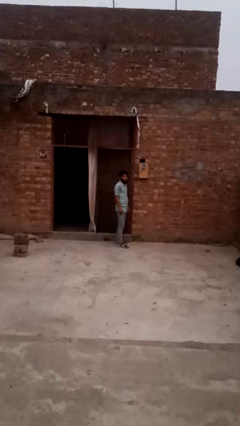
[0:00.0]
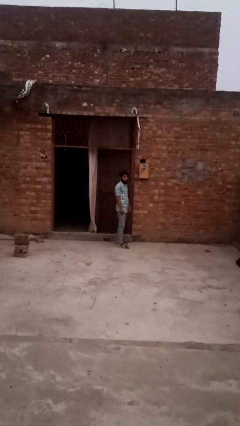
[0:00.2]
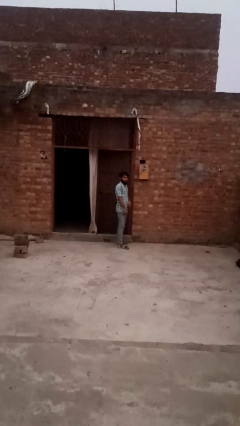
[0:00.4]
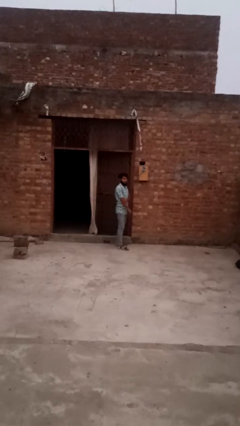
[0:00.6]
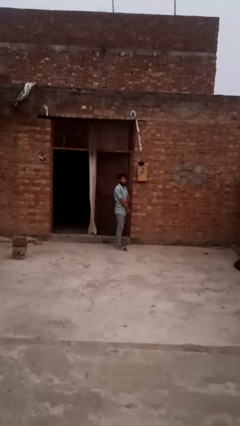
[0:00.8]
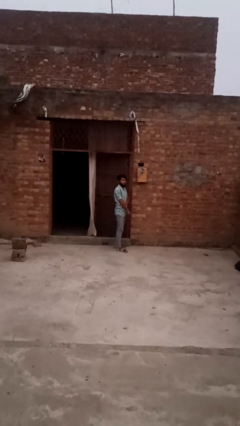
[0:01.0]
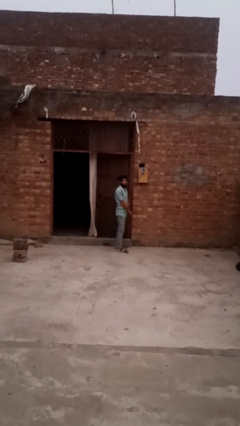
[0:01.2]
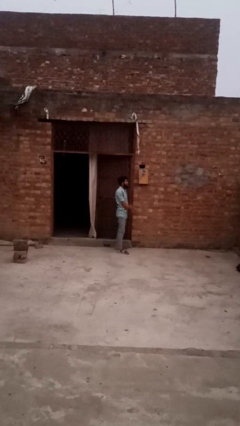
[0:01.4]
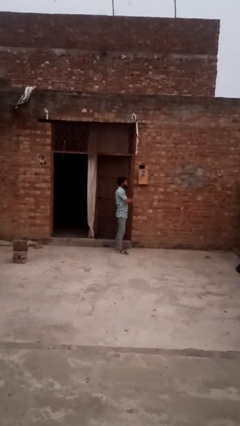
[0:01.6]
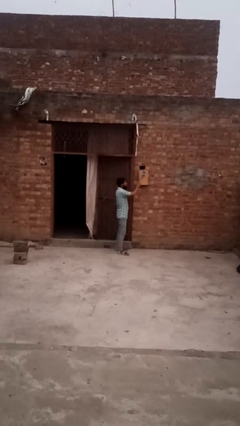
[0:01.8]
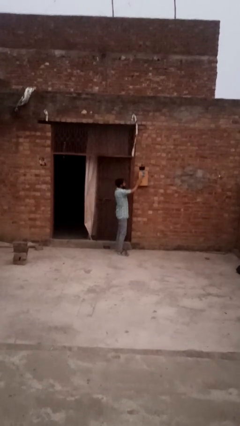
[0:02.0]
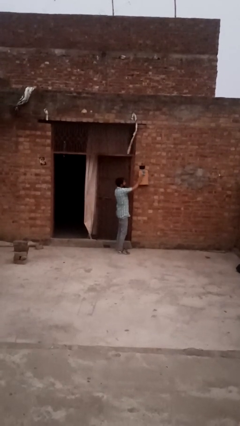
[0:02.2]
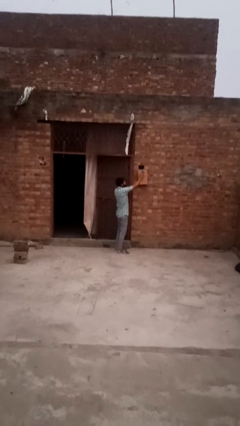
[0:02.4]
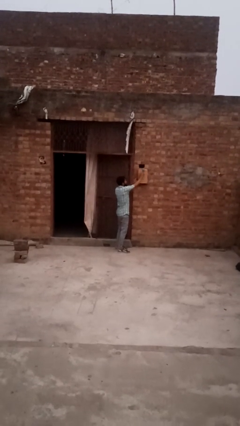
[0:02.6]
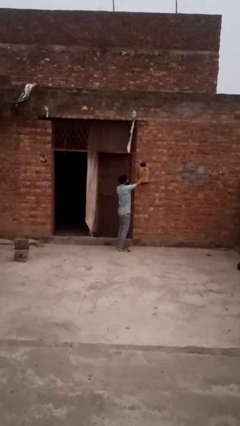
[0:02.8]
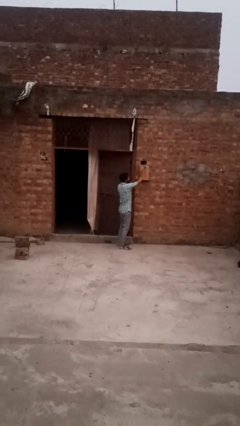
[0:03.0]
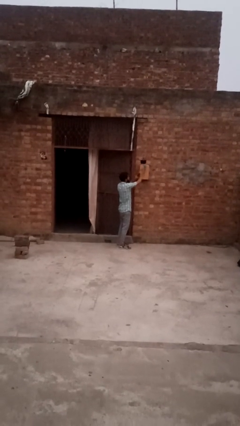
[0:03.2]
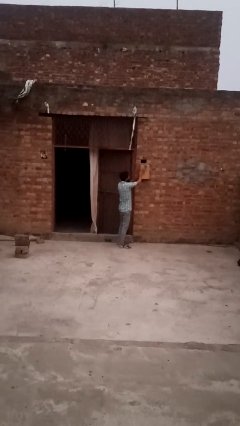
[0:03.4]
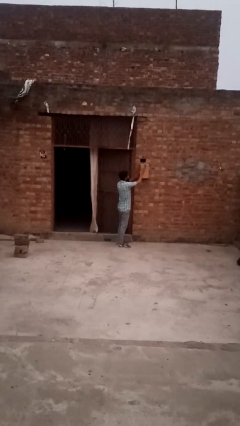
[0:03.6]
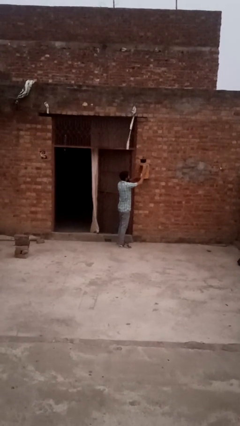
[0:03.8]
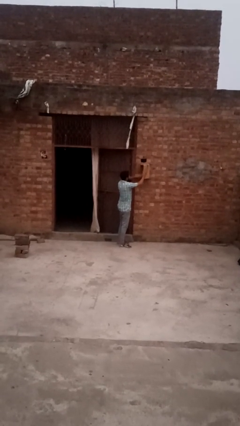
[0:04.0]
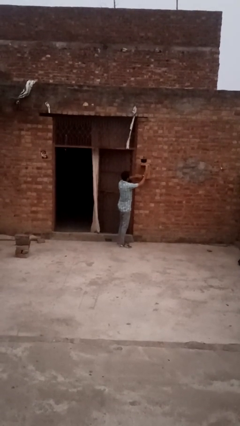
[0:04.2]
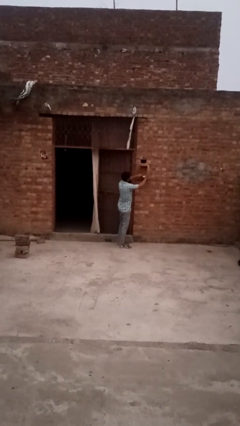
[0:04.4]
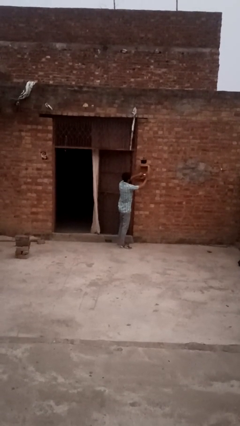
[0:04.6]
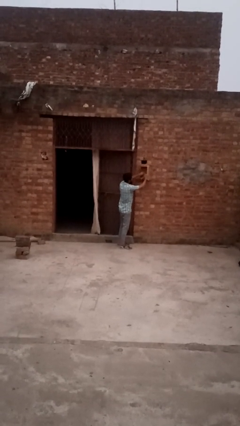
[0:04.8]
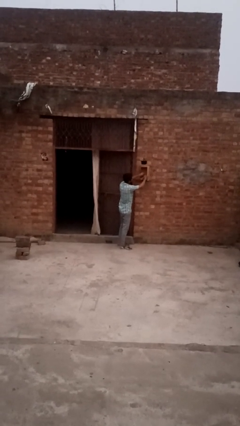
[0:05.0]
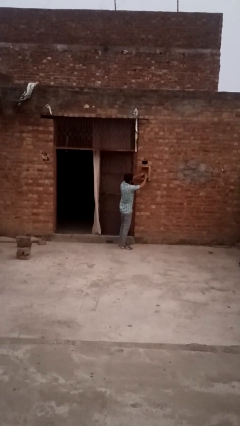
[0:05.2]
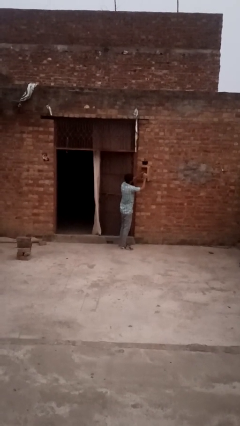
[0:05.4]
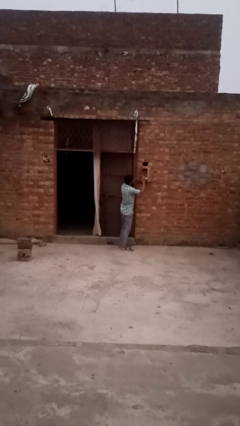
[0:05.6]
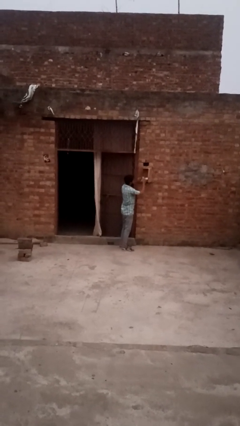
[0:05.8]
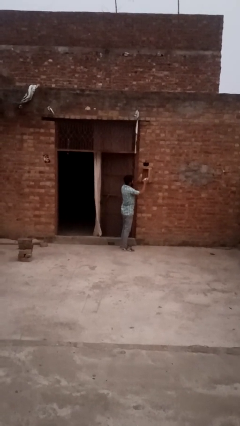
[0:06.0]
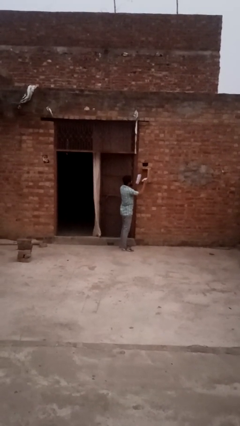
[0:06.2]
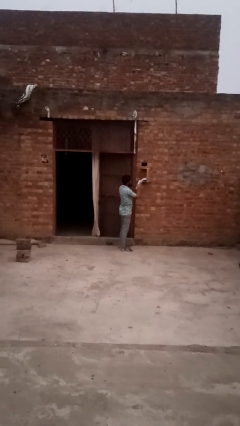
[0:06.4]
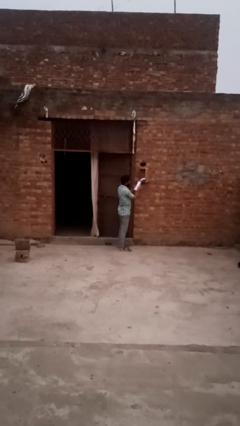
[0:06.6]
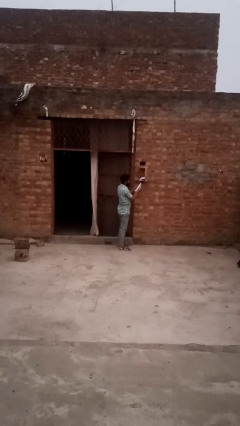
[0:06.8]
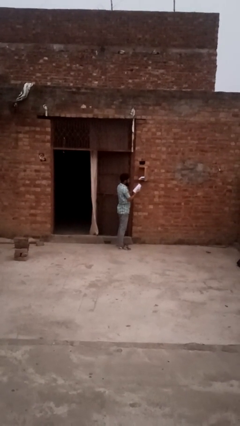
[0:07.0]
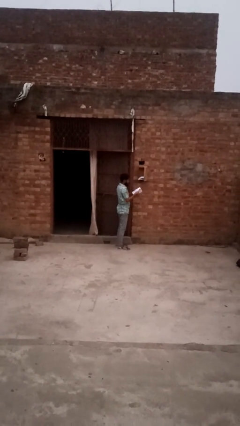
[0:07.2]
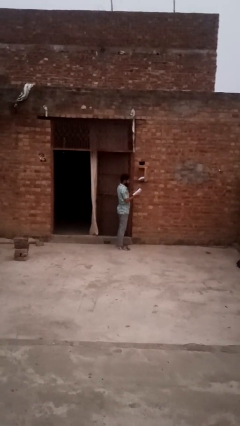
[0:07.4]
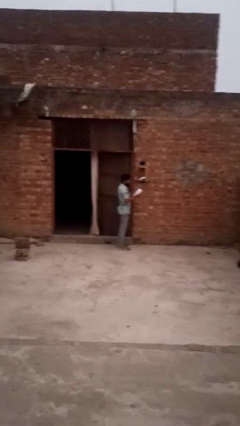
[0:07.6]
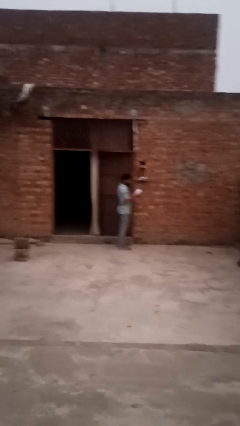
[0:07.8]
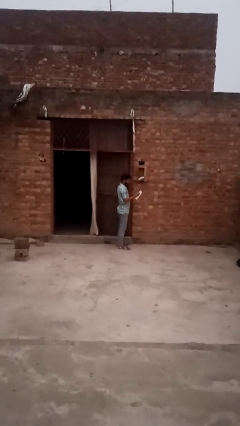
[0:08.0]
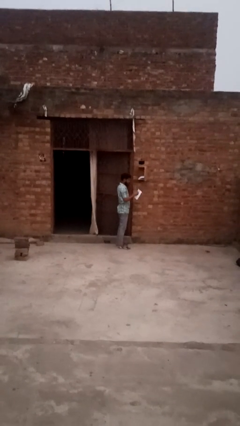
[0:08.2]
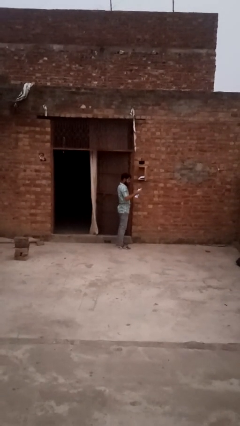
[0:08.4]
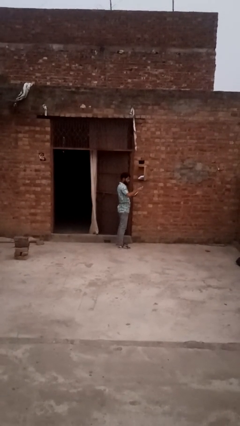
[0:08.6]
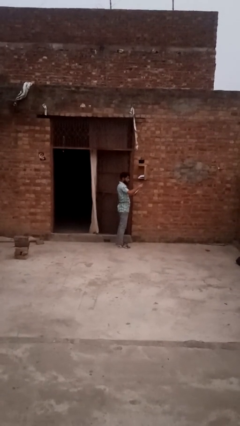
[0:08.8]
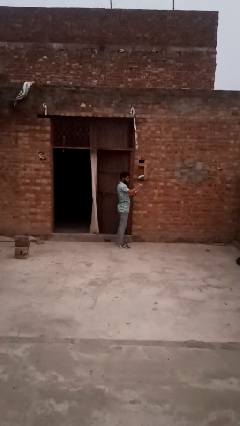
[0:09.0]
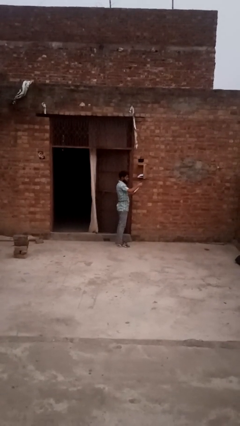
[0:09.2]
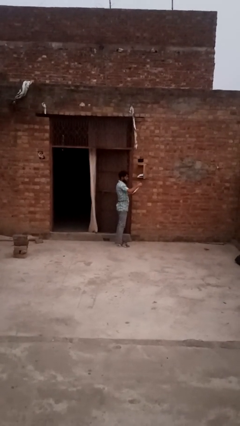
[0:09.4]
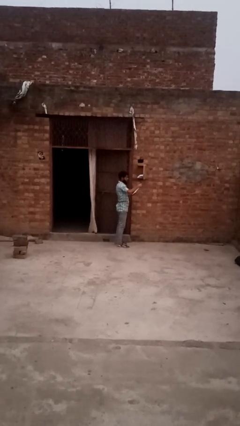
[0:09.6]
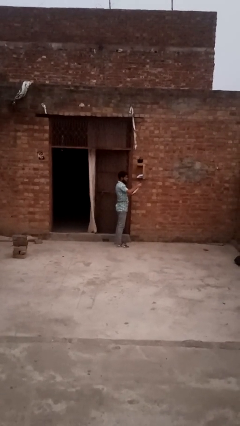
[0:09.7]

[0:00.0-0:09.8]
person puts letters in mailbox

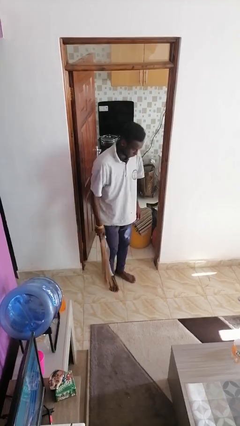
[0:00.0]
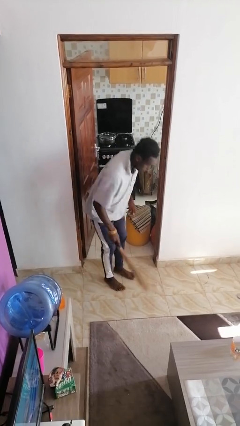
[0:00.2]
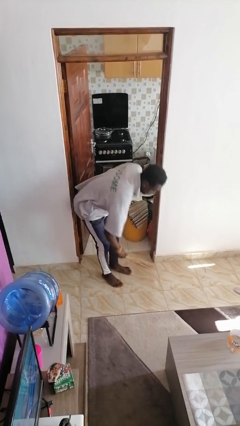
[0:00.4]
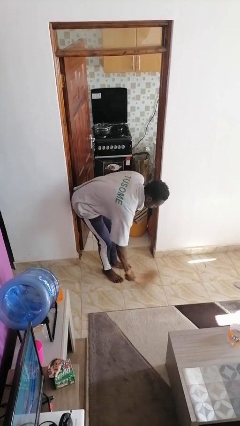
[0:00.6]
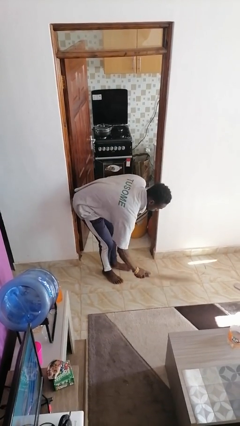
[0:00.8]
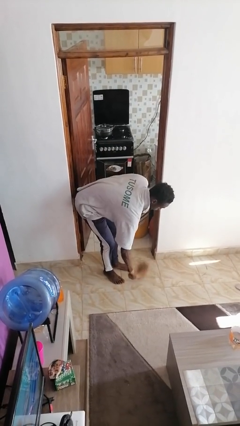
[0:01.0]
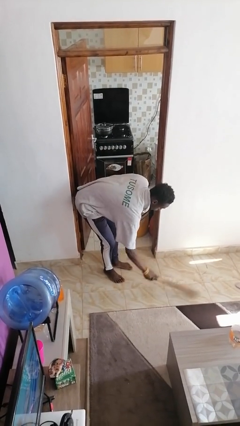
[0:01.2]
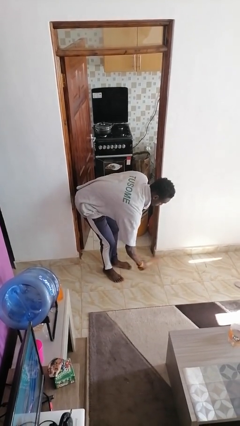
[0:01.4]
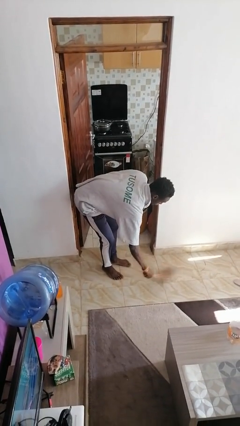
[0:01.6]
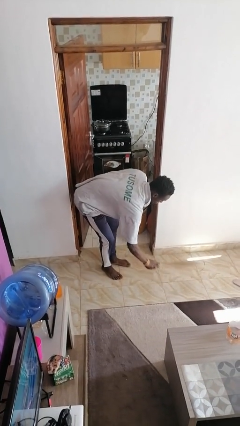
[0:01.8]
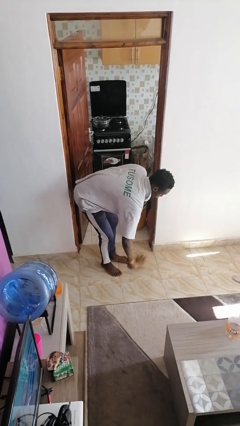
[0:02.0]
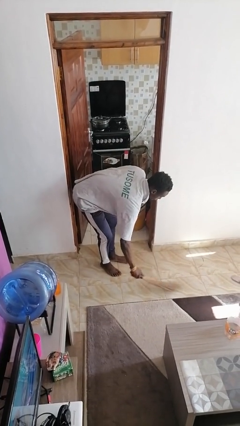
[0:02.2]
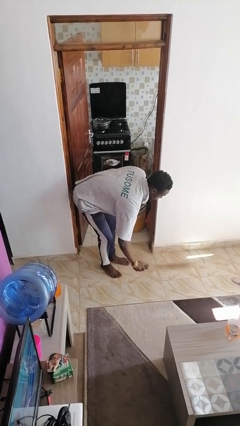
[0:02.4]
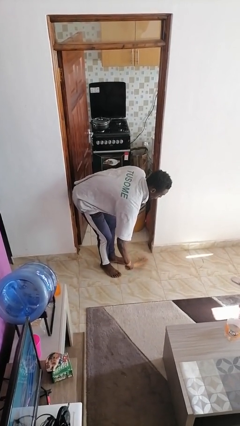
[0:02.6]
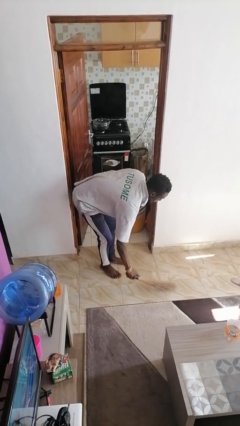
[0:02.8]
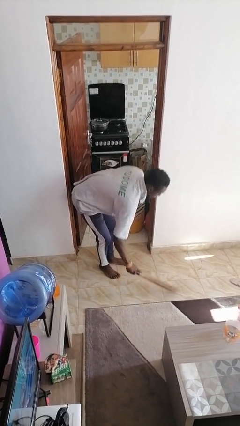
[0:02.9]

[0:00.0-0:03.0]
person sweeps floor

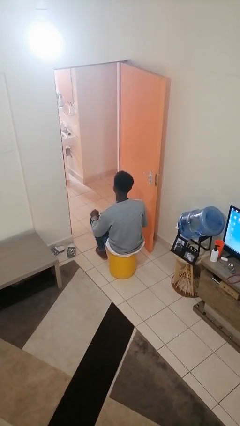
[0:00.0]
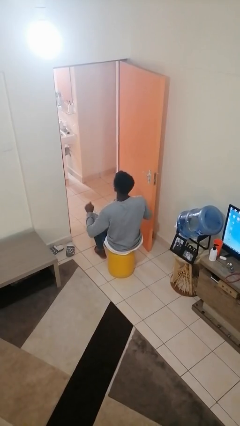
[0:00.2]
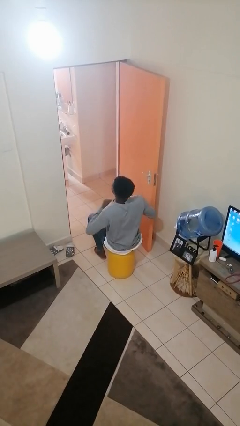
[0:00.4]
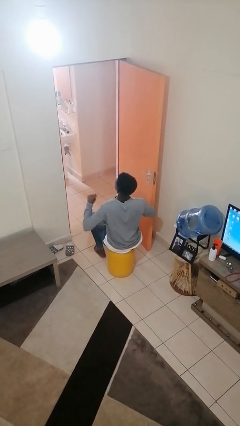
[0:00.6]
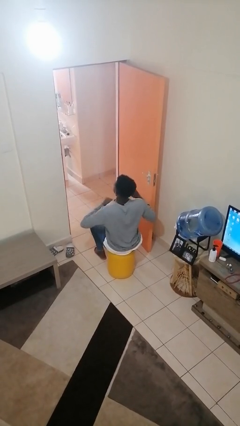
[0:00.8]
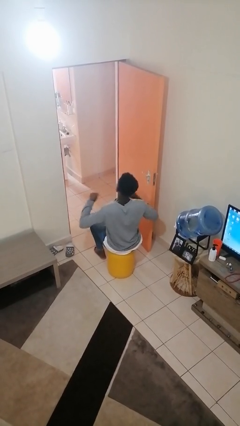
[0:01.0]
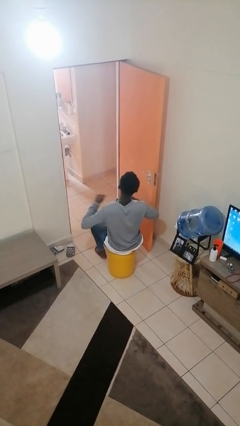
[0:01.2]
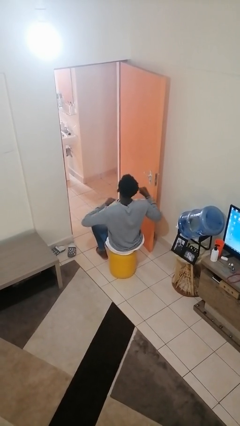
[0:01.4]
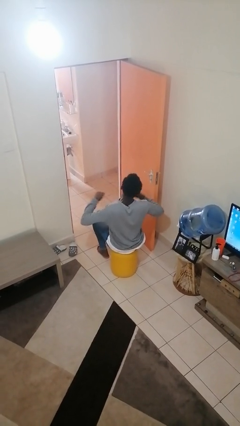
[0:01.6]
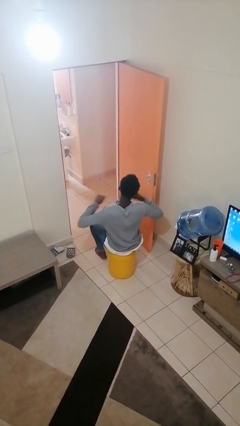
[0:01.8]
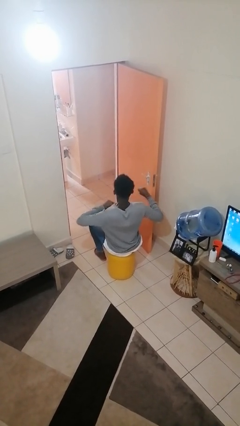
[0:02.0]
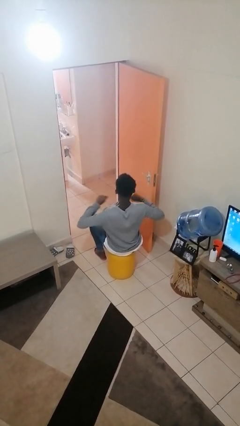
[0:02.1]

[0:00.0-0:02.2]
person drums on chest

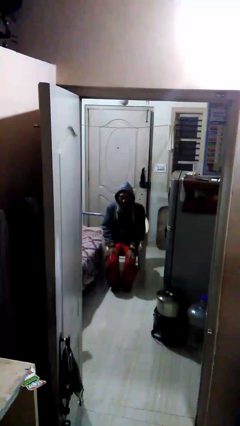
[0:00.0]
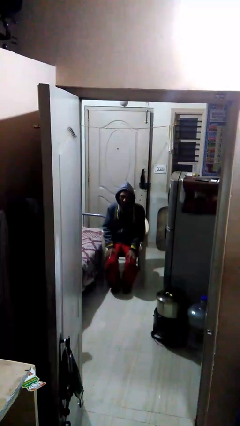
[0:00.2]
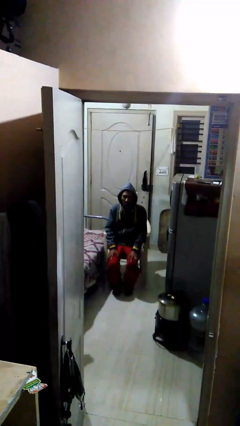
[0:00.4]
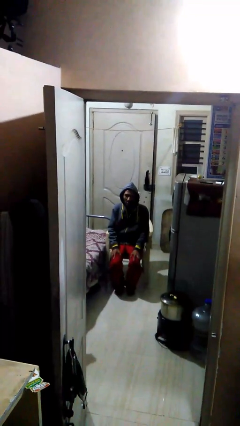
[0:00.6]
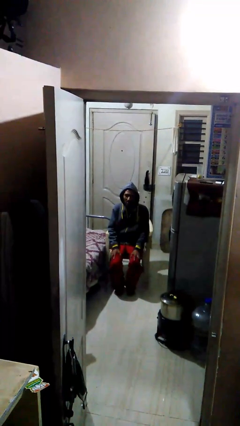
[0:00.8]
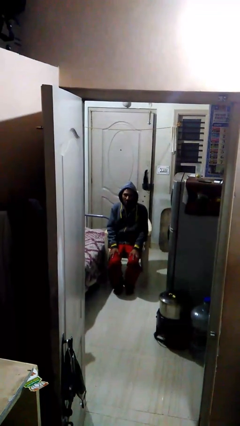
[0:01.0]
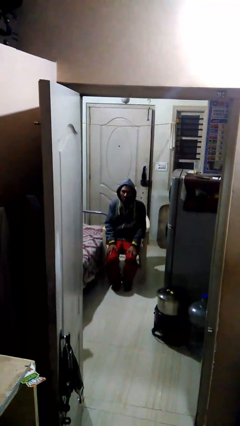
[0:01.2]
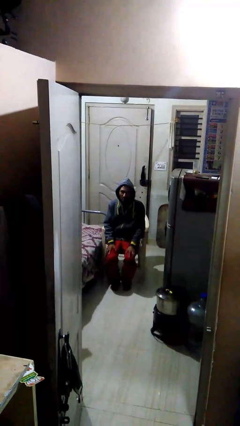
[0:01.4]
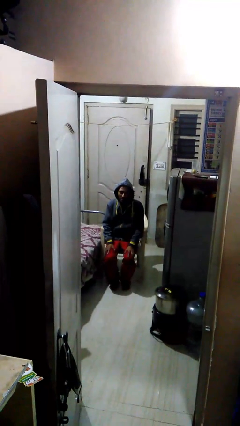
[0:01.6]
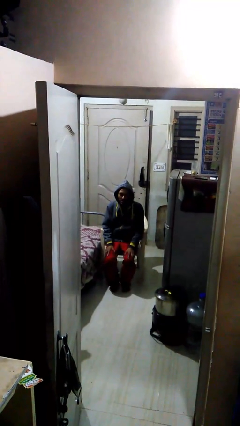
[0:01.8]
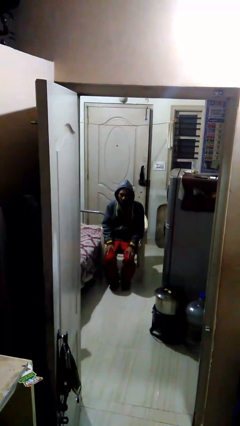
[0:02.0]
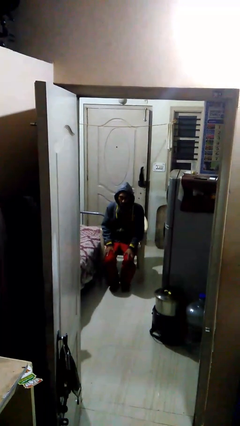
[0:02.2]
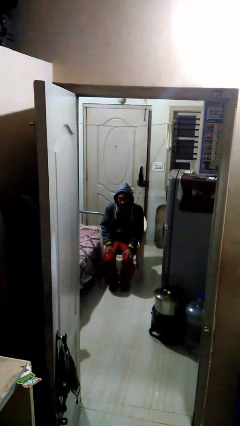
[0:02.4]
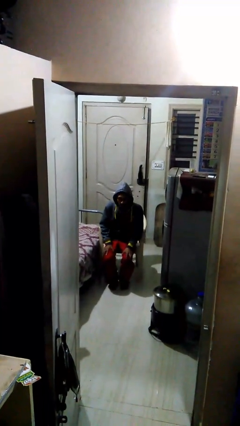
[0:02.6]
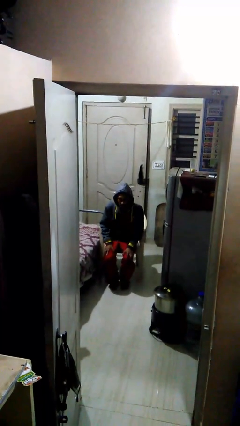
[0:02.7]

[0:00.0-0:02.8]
person stands up
